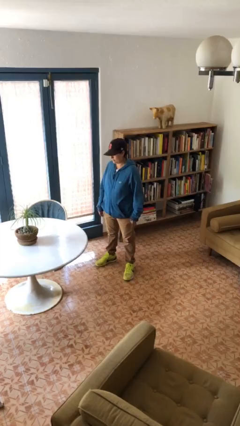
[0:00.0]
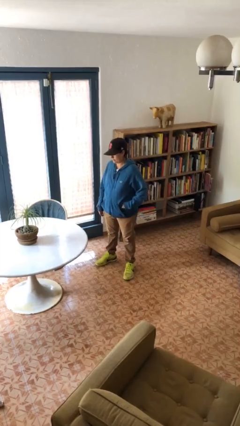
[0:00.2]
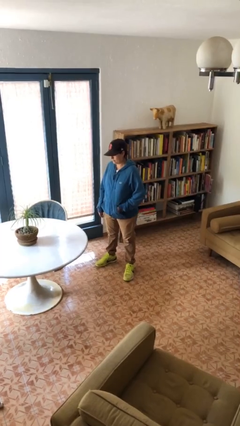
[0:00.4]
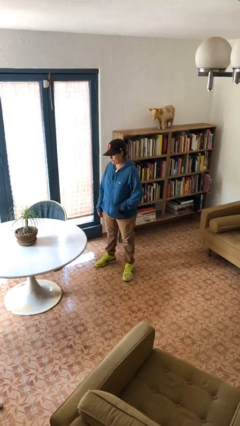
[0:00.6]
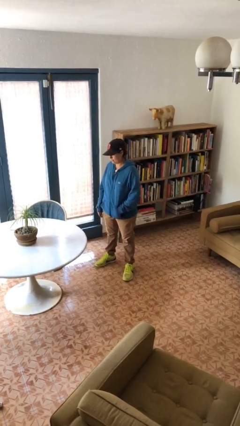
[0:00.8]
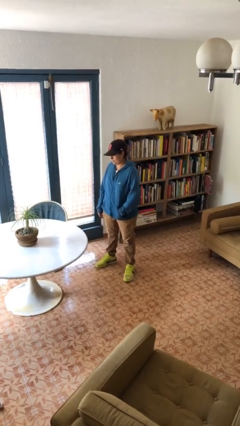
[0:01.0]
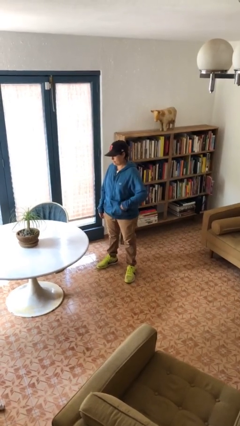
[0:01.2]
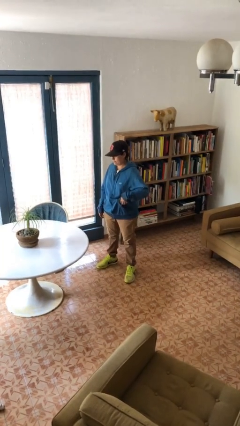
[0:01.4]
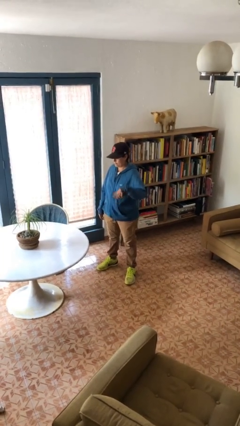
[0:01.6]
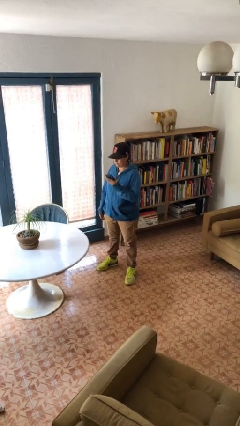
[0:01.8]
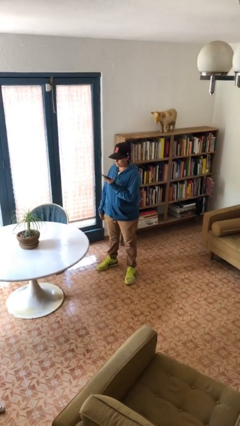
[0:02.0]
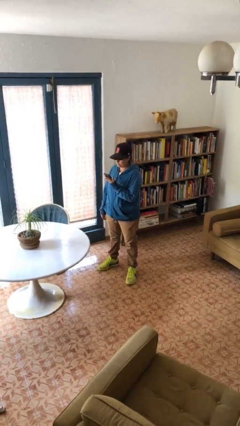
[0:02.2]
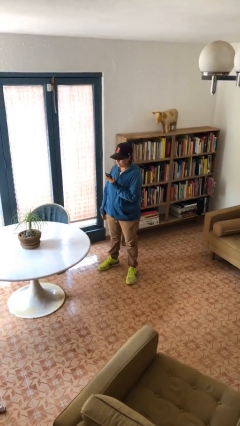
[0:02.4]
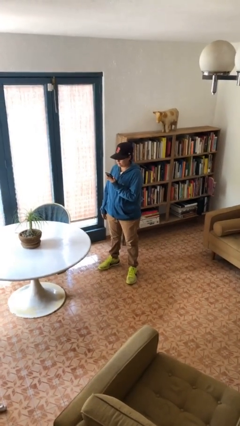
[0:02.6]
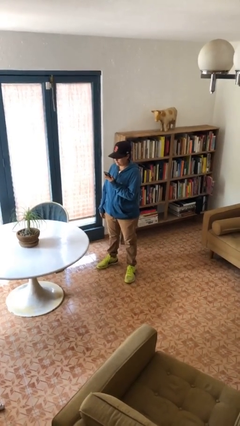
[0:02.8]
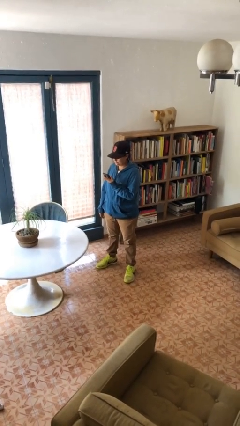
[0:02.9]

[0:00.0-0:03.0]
person takes phone from pocket

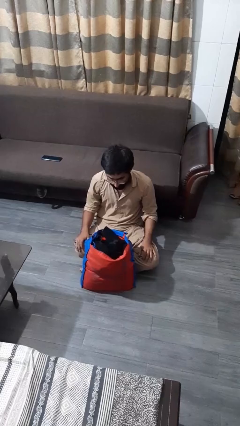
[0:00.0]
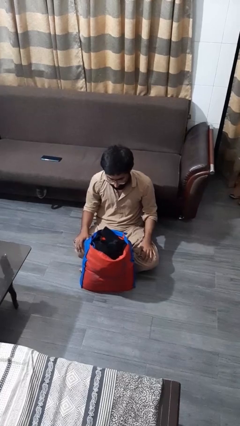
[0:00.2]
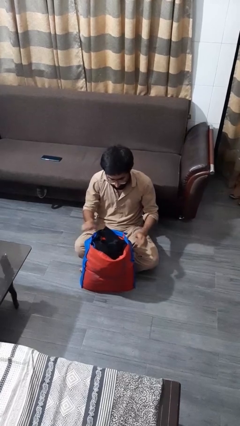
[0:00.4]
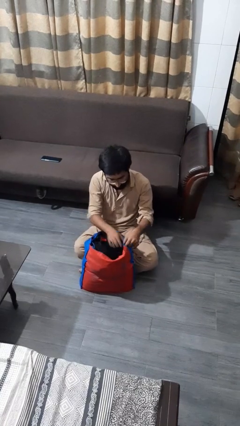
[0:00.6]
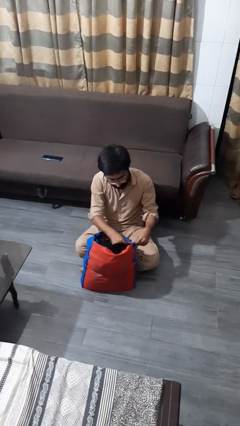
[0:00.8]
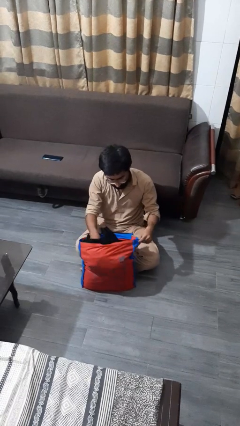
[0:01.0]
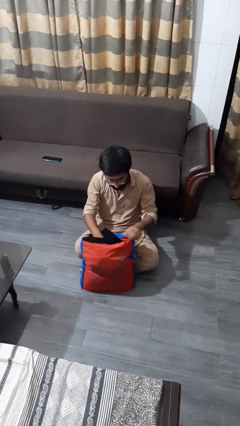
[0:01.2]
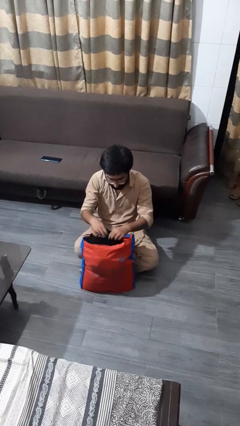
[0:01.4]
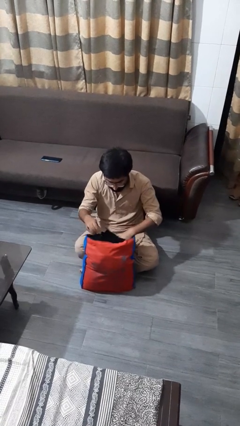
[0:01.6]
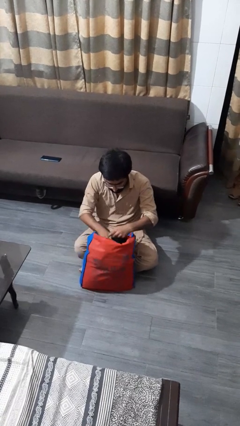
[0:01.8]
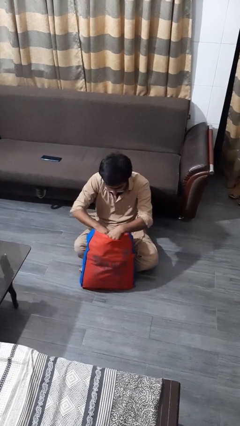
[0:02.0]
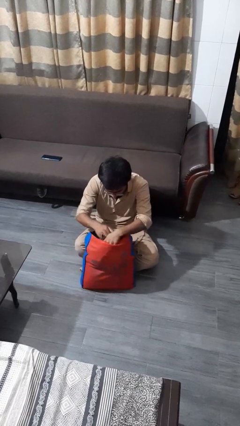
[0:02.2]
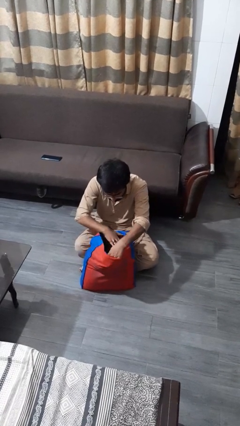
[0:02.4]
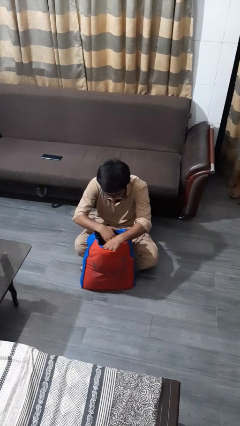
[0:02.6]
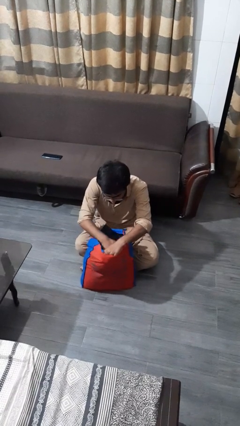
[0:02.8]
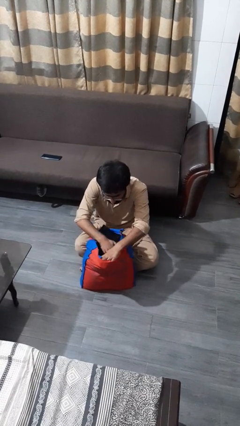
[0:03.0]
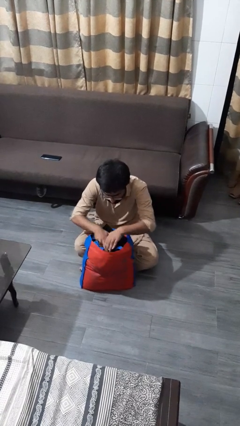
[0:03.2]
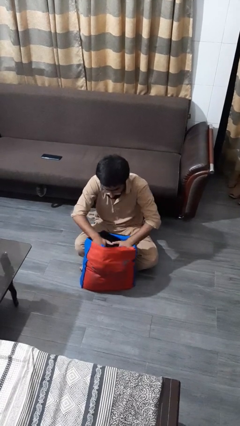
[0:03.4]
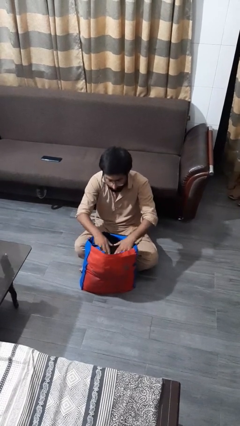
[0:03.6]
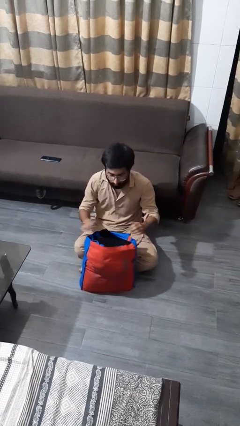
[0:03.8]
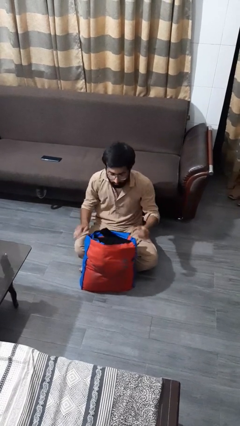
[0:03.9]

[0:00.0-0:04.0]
person searches in bag

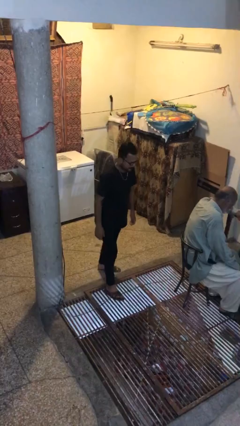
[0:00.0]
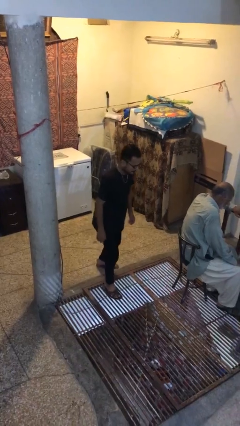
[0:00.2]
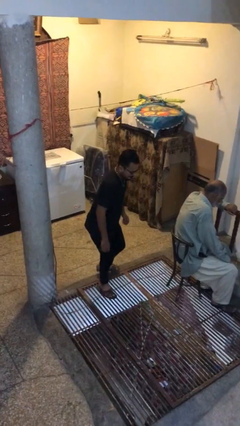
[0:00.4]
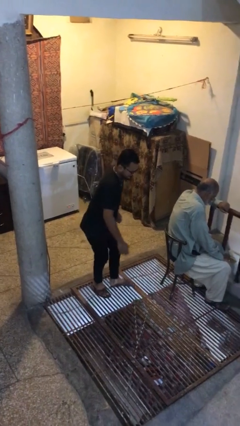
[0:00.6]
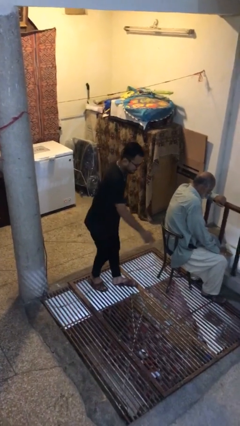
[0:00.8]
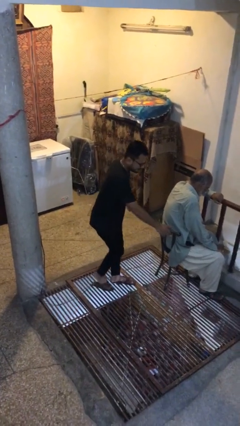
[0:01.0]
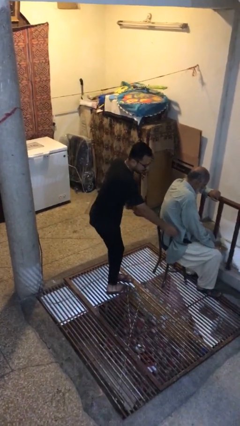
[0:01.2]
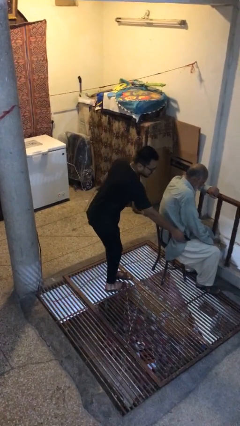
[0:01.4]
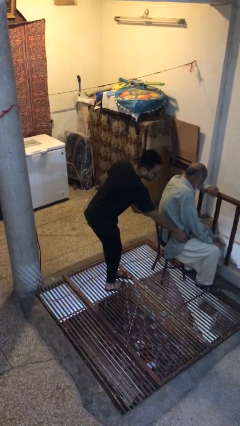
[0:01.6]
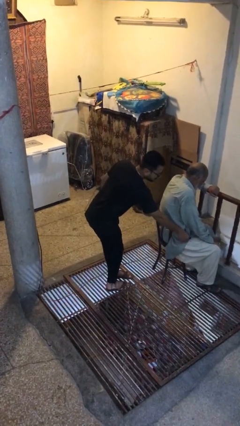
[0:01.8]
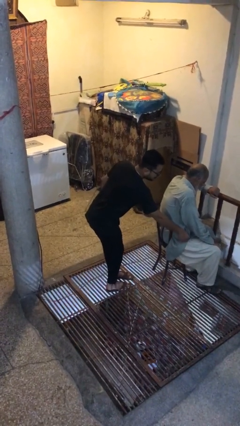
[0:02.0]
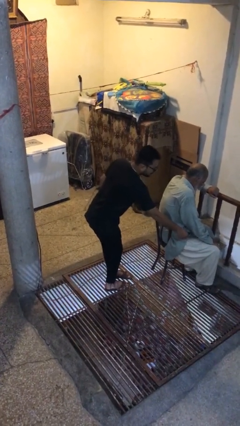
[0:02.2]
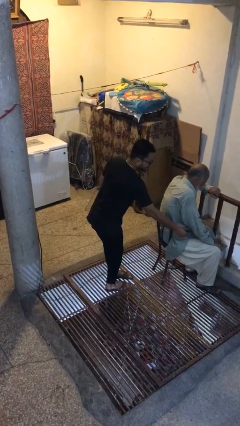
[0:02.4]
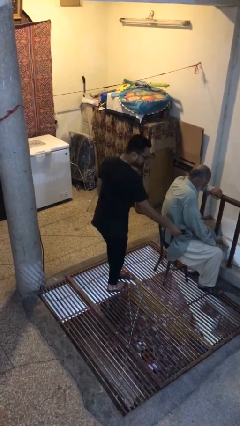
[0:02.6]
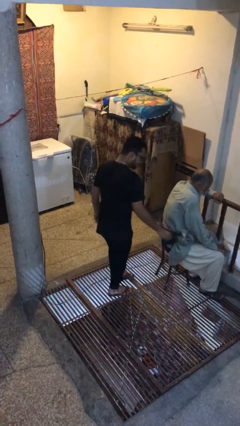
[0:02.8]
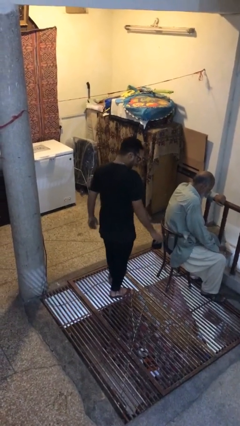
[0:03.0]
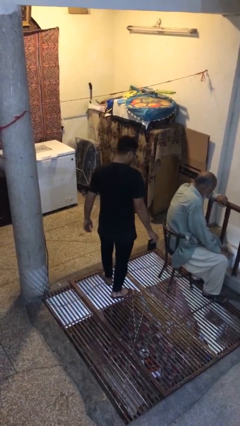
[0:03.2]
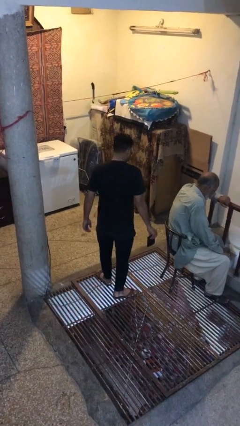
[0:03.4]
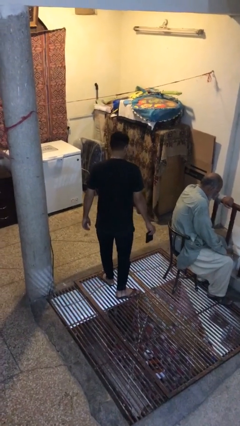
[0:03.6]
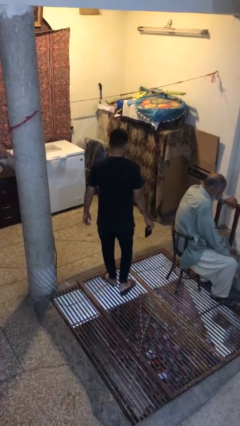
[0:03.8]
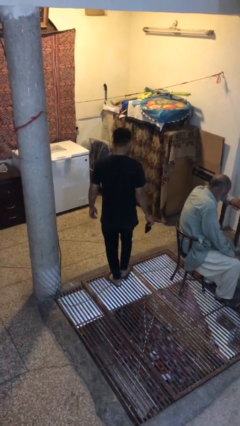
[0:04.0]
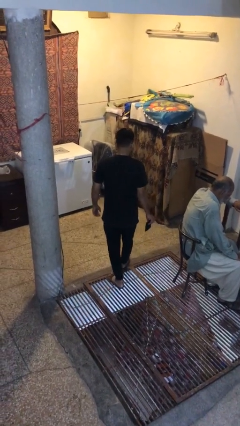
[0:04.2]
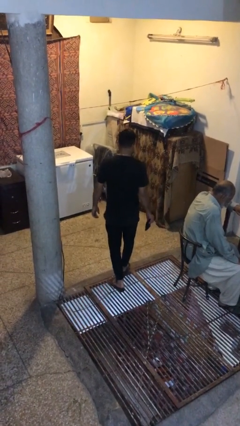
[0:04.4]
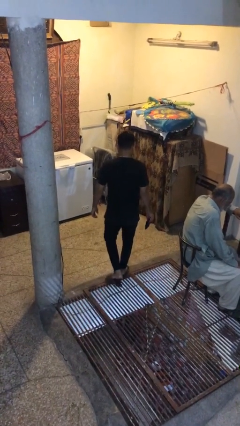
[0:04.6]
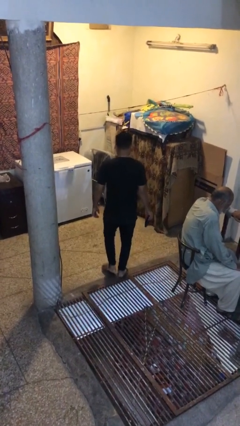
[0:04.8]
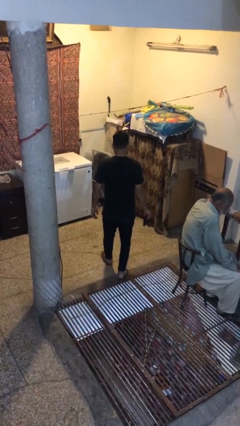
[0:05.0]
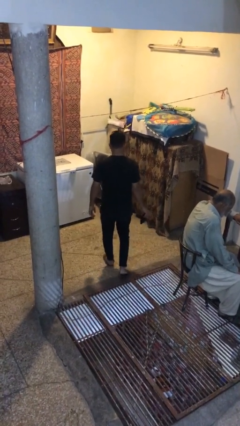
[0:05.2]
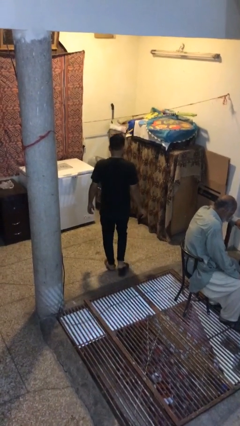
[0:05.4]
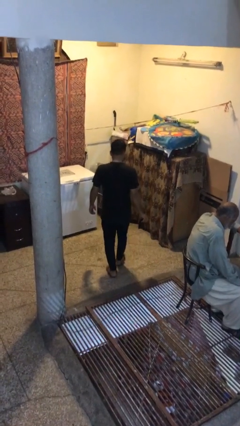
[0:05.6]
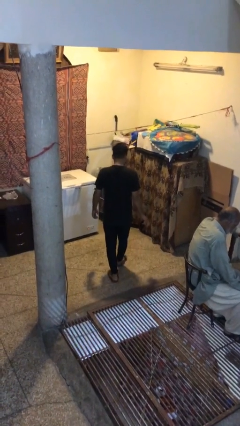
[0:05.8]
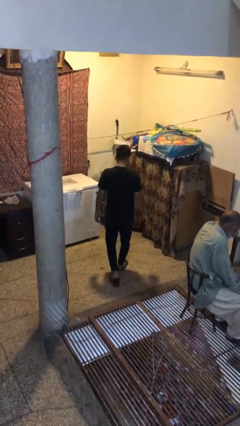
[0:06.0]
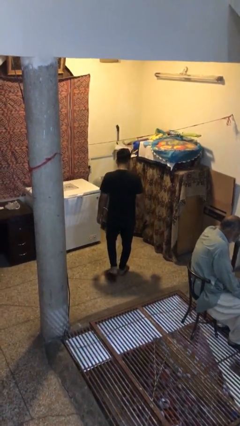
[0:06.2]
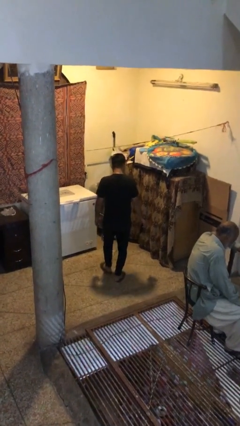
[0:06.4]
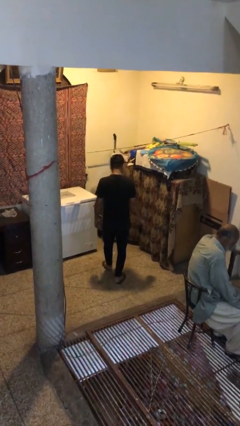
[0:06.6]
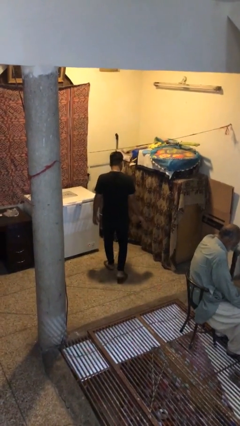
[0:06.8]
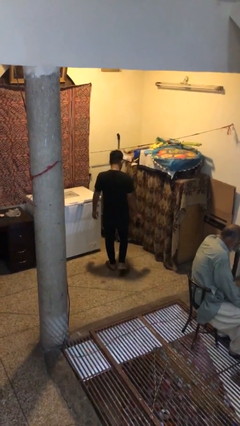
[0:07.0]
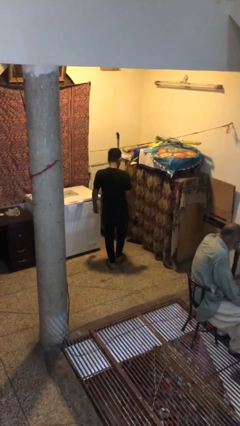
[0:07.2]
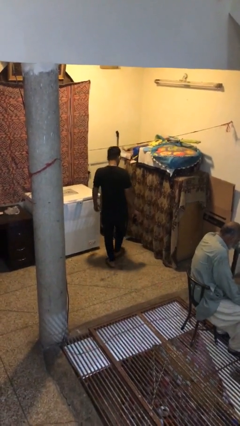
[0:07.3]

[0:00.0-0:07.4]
person steals object from person

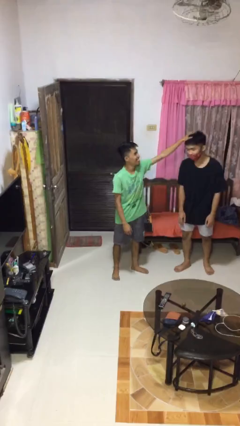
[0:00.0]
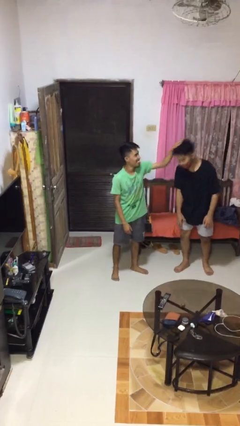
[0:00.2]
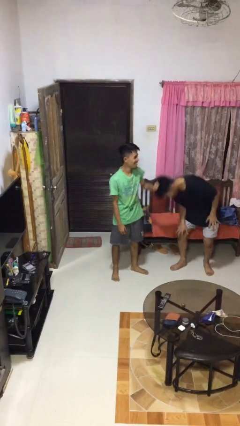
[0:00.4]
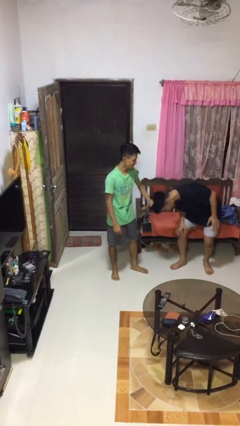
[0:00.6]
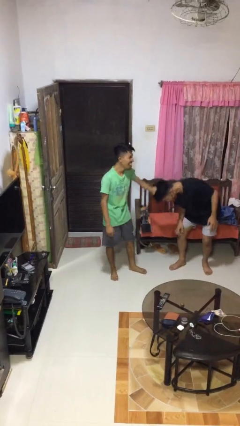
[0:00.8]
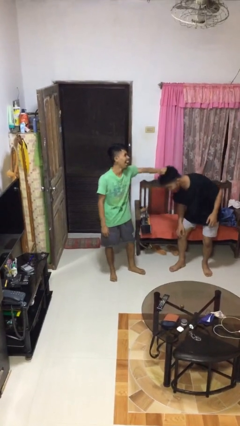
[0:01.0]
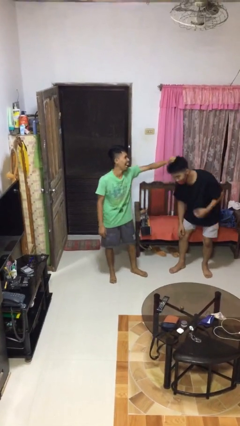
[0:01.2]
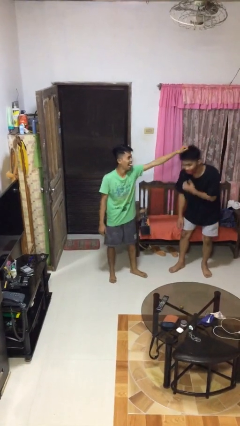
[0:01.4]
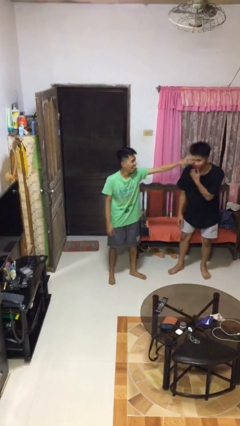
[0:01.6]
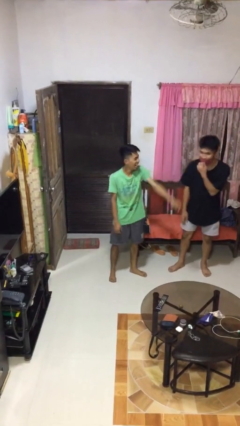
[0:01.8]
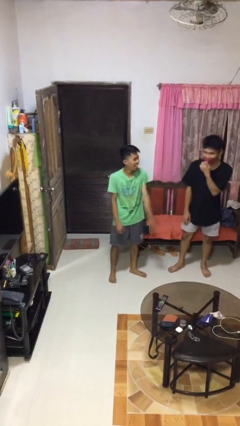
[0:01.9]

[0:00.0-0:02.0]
person grabs person by hair

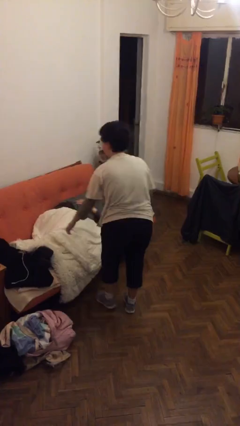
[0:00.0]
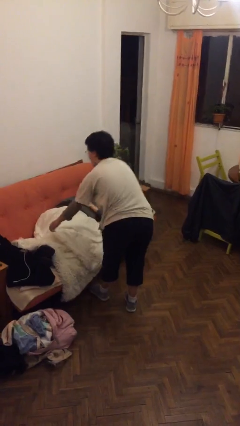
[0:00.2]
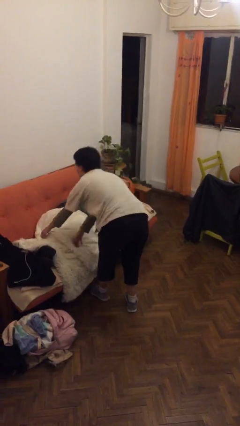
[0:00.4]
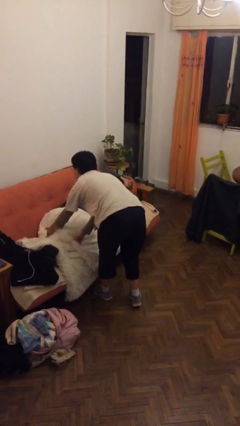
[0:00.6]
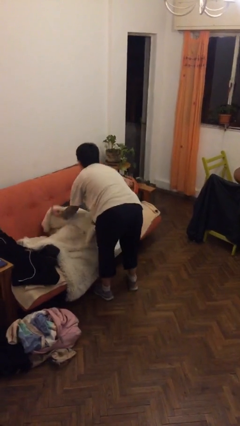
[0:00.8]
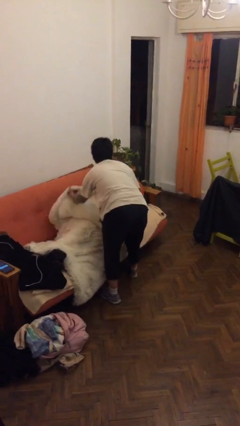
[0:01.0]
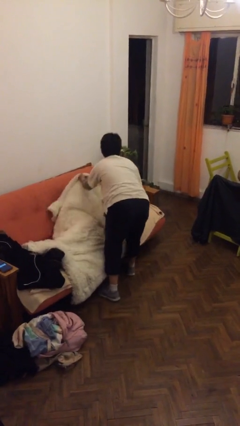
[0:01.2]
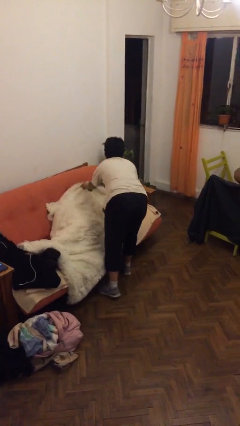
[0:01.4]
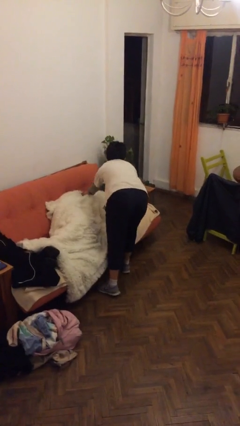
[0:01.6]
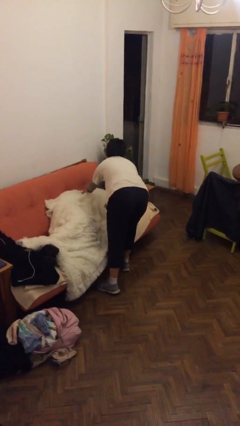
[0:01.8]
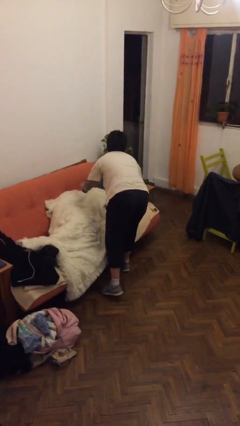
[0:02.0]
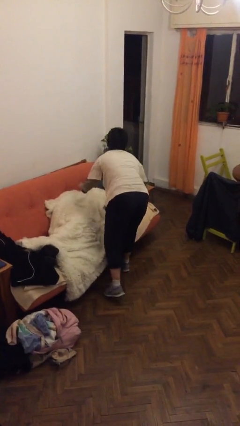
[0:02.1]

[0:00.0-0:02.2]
person covers friend with blanket
